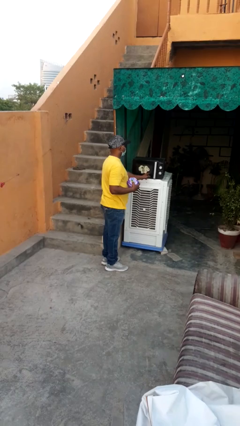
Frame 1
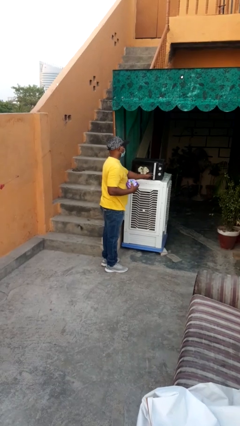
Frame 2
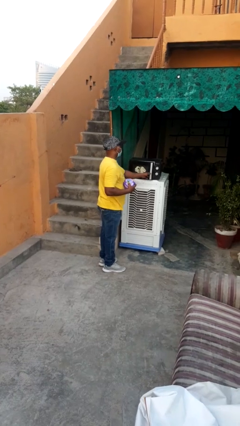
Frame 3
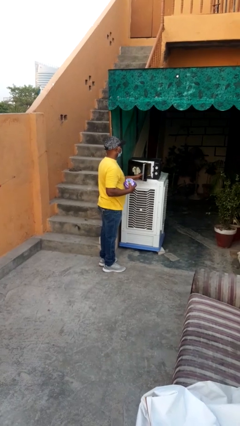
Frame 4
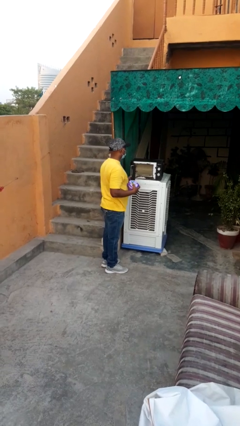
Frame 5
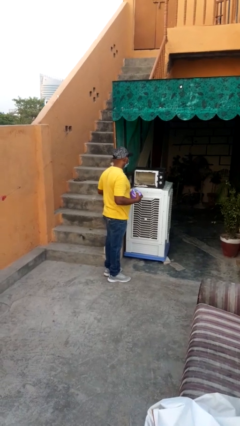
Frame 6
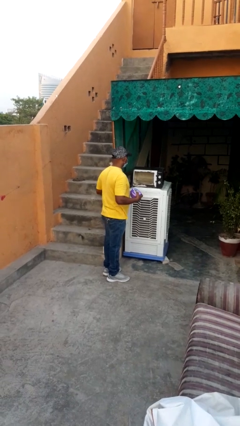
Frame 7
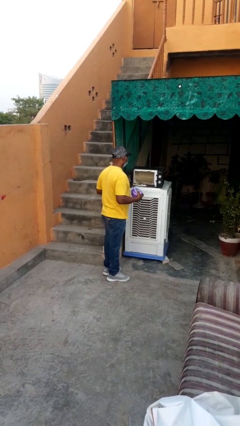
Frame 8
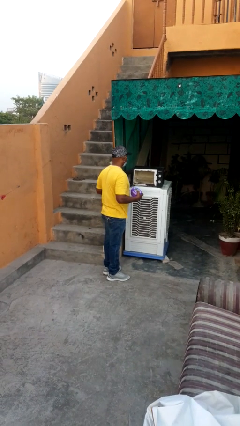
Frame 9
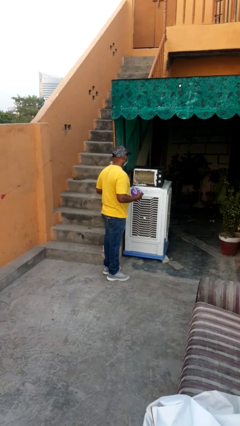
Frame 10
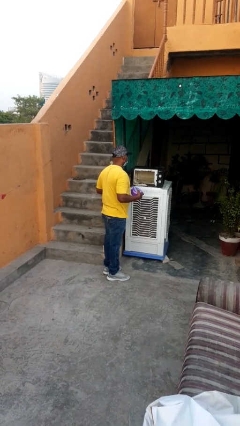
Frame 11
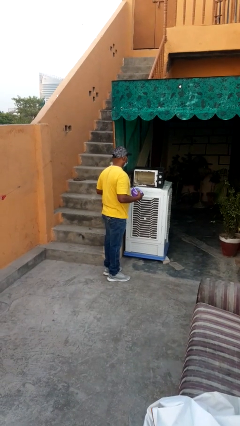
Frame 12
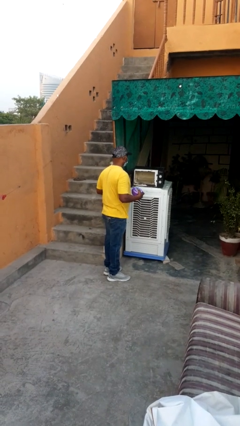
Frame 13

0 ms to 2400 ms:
person opens microwave

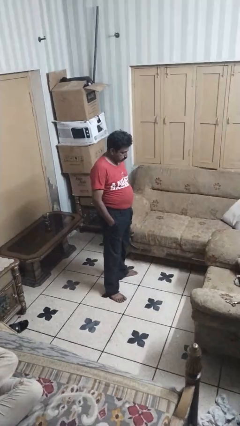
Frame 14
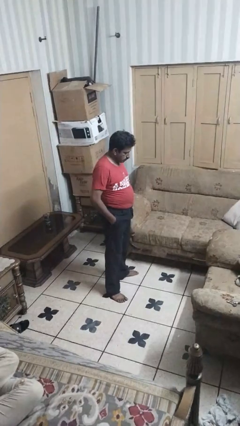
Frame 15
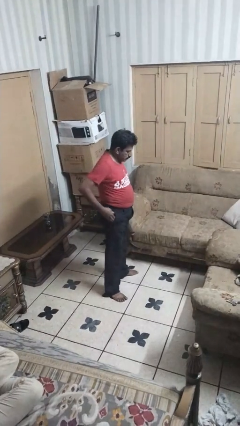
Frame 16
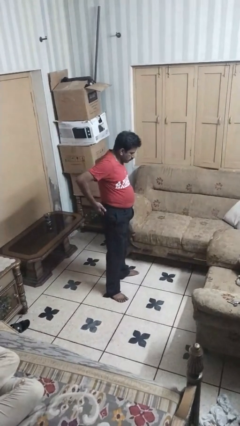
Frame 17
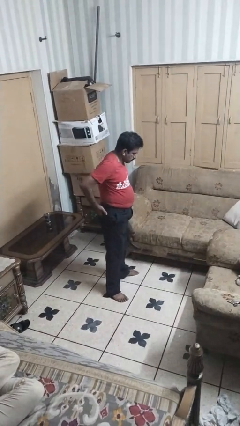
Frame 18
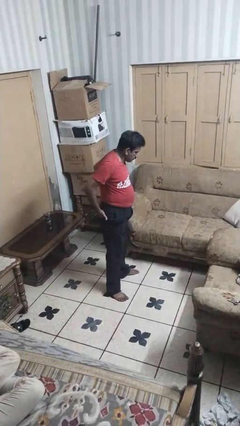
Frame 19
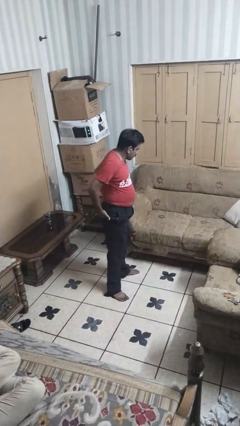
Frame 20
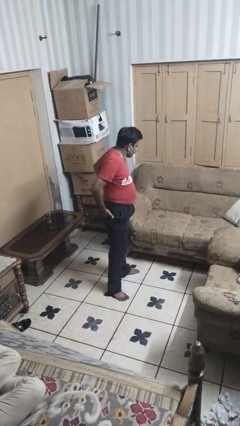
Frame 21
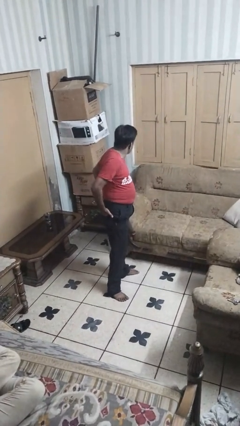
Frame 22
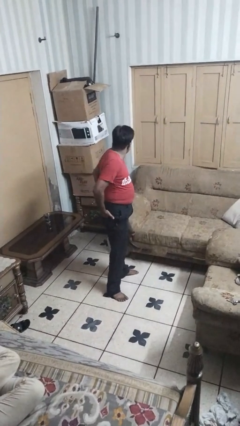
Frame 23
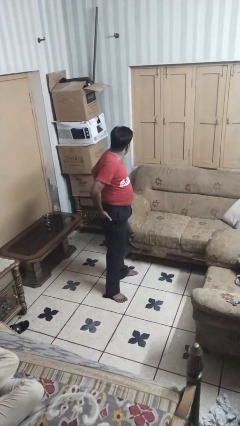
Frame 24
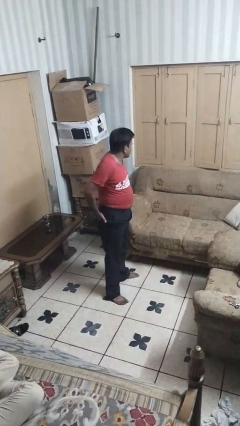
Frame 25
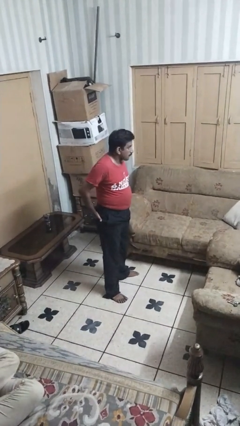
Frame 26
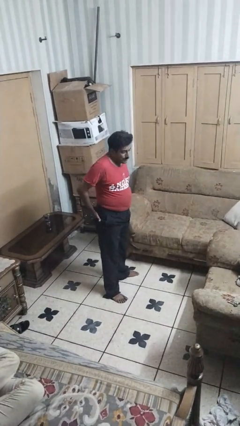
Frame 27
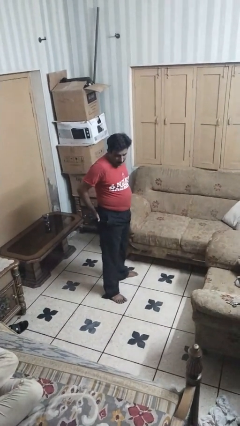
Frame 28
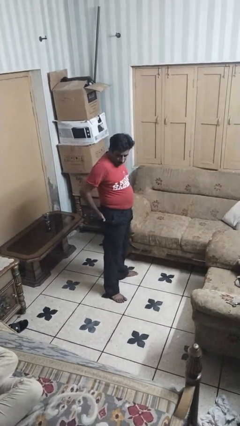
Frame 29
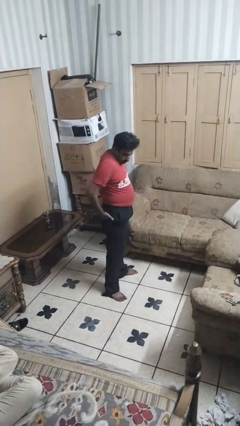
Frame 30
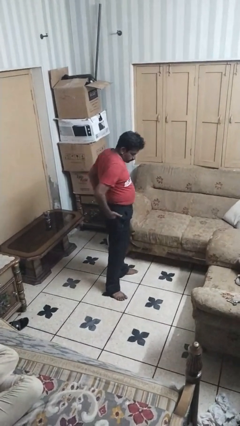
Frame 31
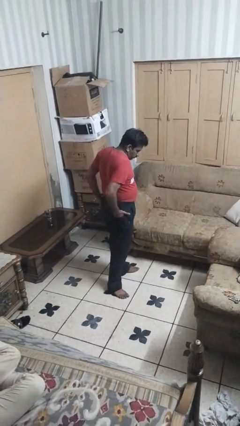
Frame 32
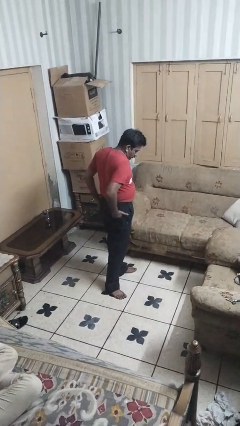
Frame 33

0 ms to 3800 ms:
person puts hands in back pockets

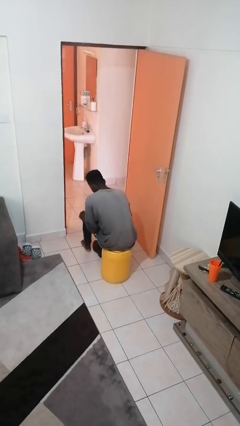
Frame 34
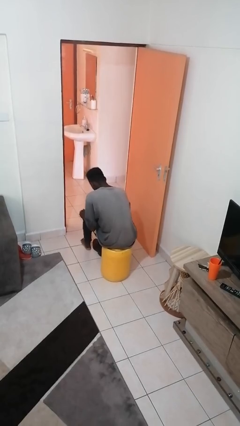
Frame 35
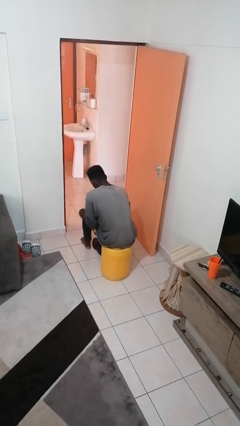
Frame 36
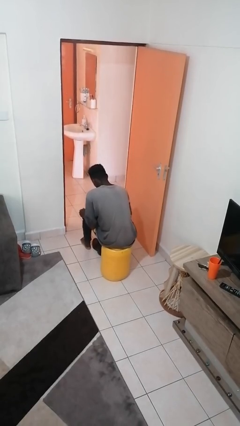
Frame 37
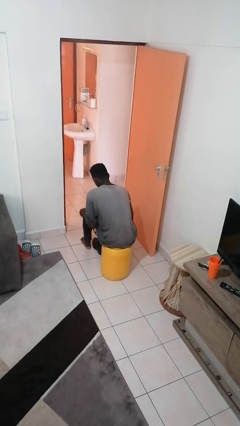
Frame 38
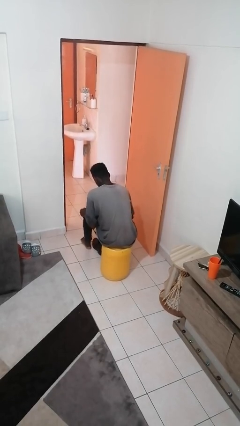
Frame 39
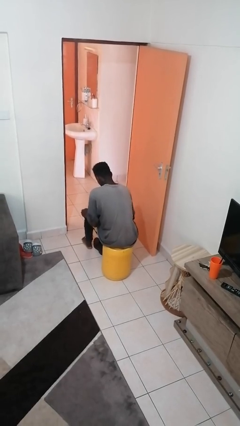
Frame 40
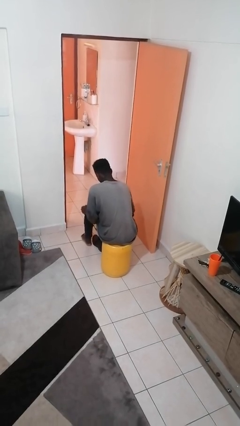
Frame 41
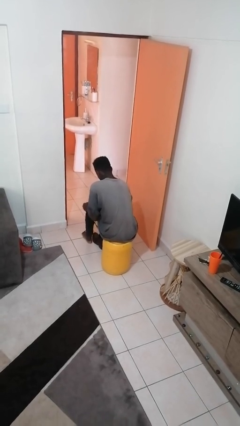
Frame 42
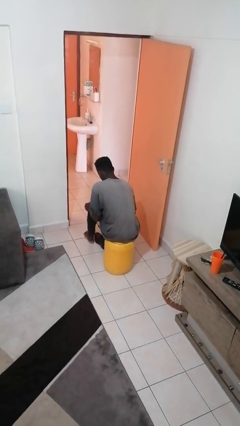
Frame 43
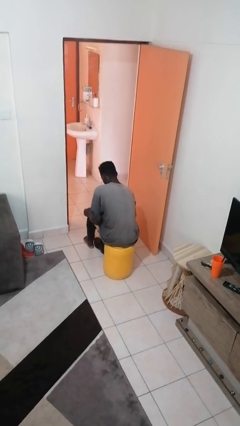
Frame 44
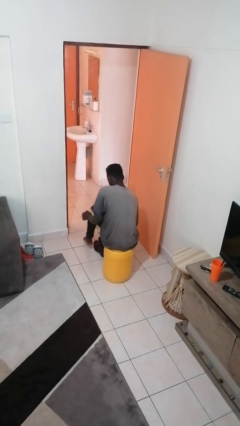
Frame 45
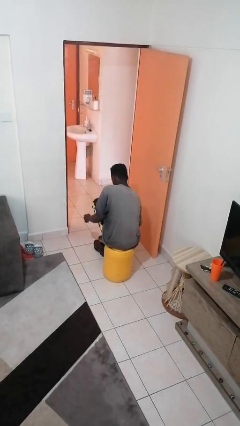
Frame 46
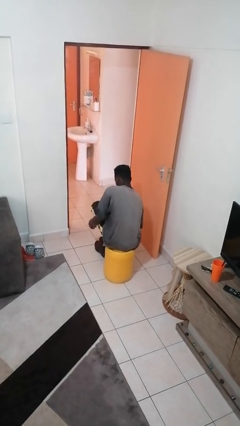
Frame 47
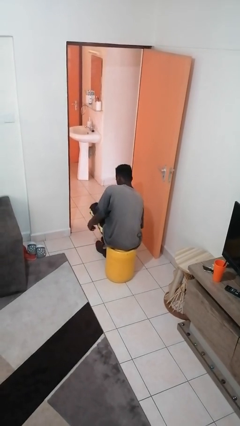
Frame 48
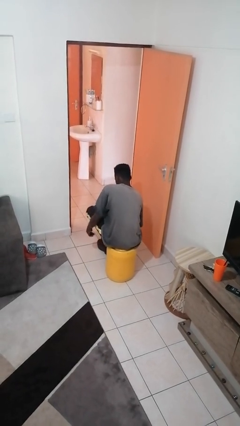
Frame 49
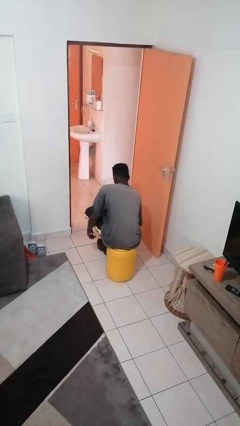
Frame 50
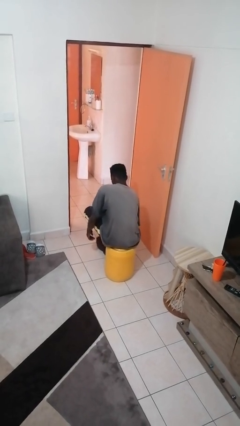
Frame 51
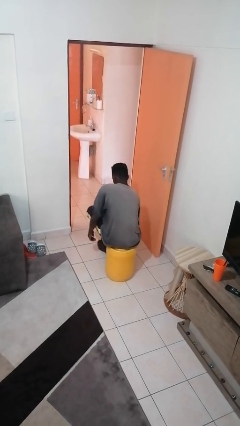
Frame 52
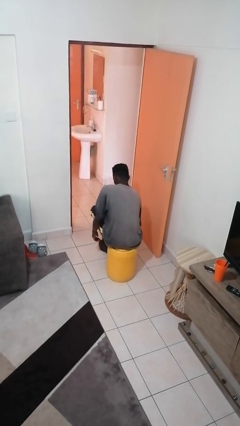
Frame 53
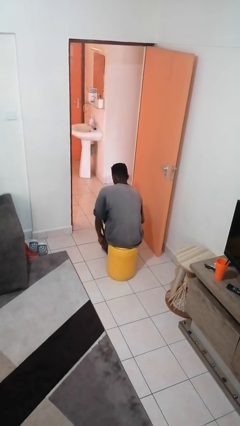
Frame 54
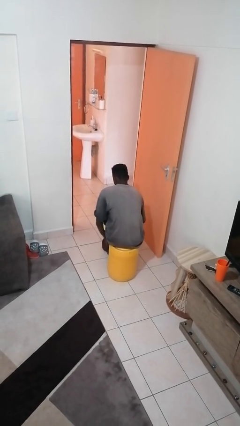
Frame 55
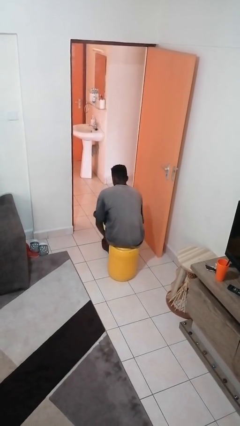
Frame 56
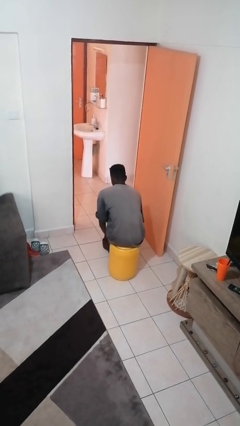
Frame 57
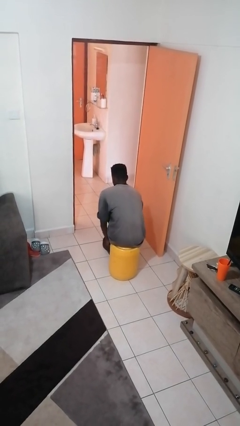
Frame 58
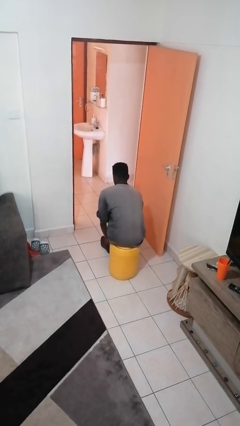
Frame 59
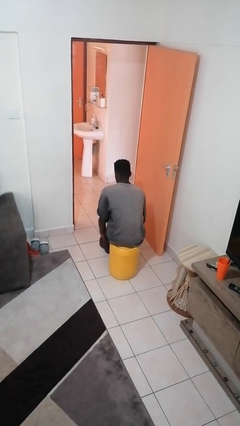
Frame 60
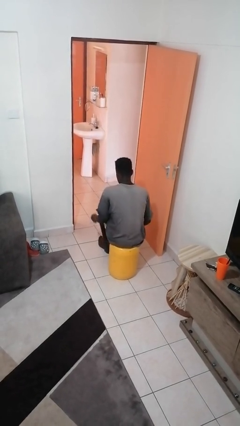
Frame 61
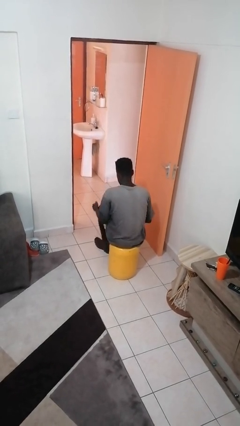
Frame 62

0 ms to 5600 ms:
person puts on shoes

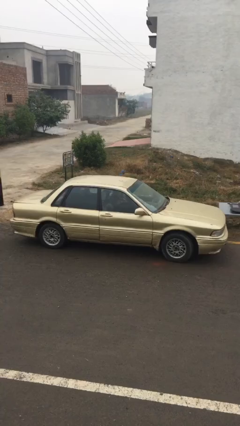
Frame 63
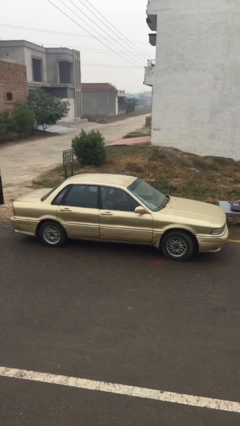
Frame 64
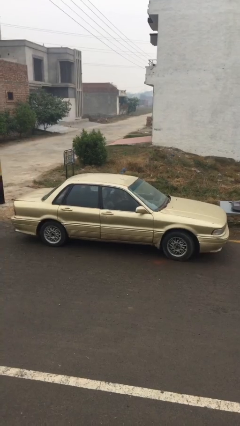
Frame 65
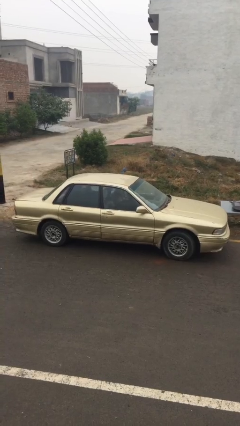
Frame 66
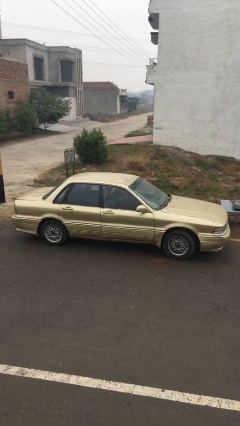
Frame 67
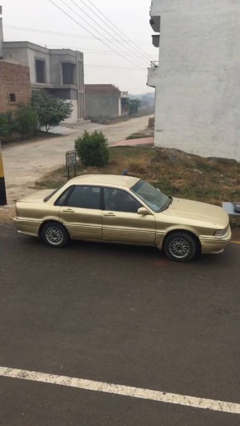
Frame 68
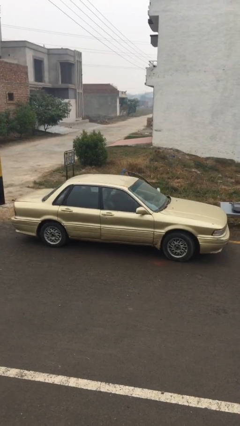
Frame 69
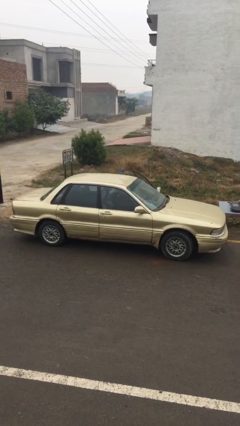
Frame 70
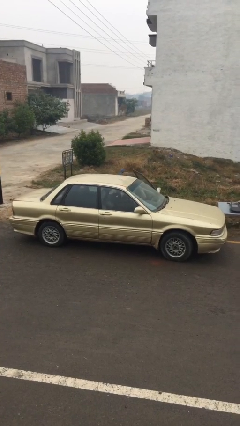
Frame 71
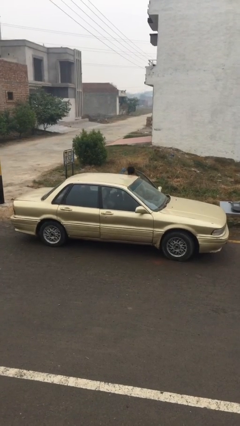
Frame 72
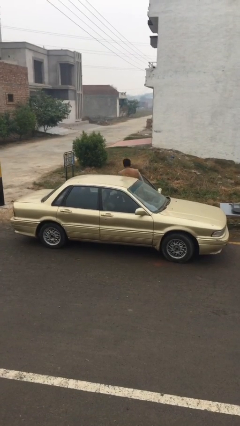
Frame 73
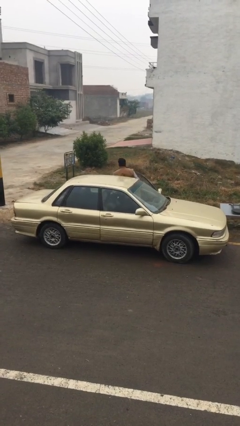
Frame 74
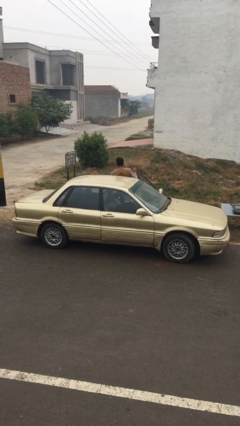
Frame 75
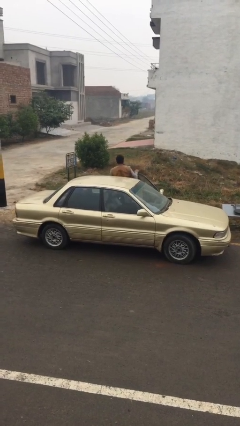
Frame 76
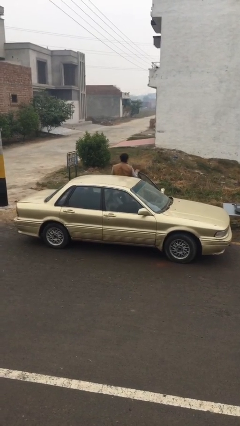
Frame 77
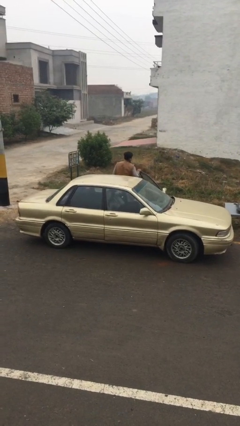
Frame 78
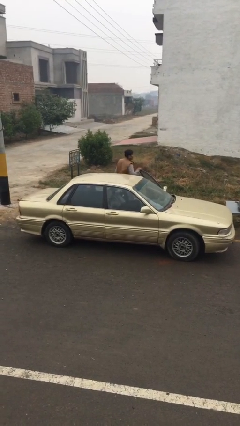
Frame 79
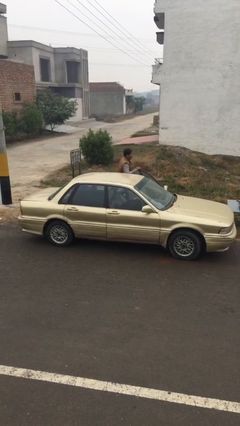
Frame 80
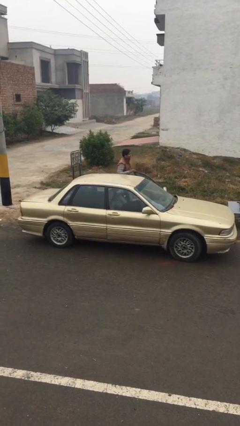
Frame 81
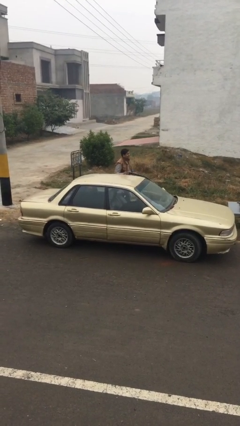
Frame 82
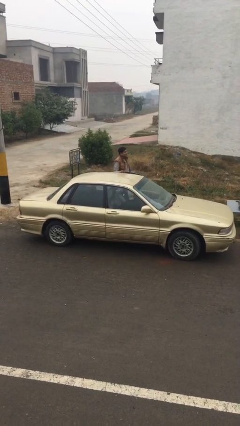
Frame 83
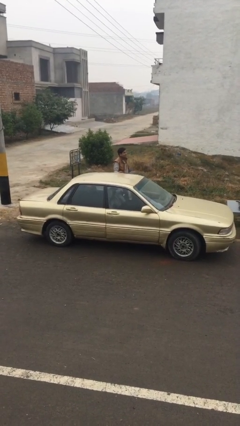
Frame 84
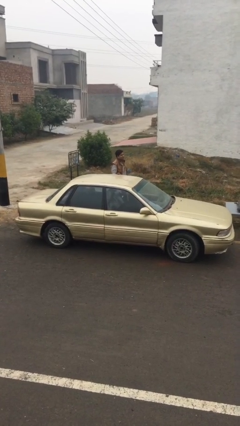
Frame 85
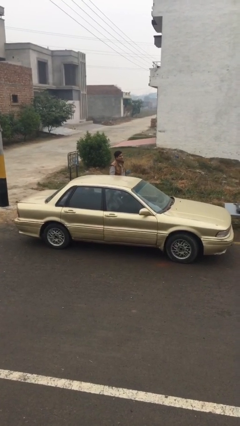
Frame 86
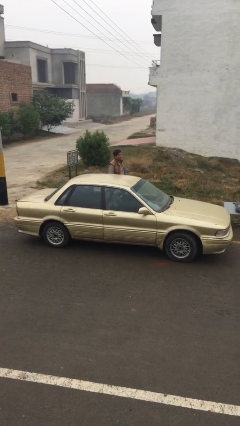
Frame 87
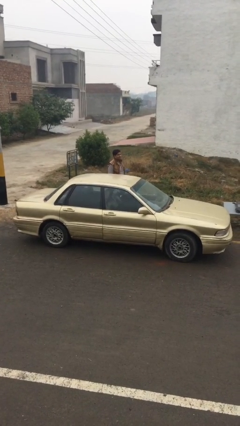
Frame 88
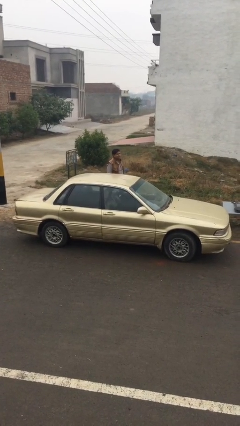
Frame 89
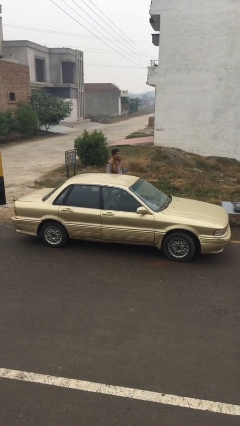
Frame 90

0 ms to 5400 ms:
car drops off person

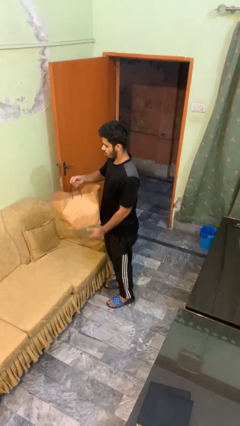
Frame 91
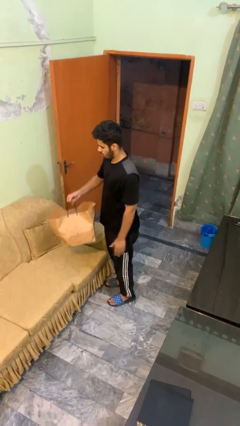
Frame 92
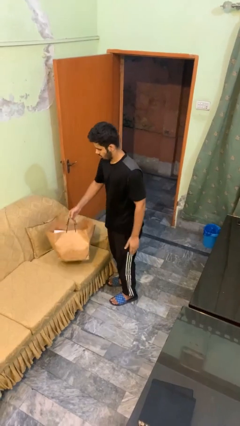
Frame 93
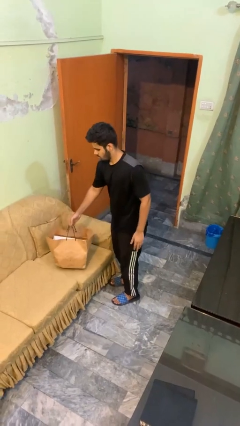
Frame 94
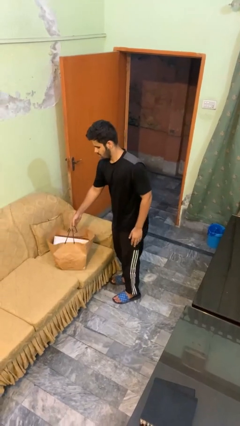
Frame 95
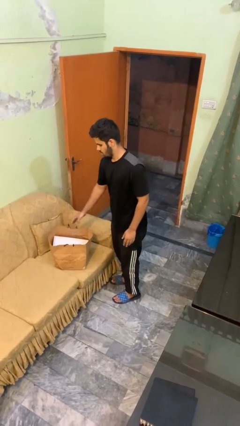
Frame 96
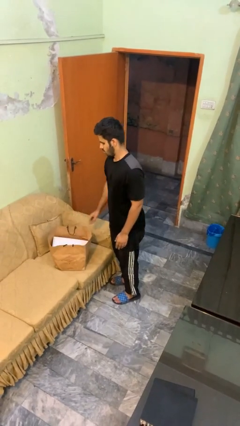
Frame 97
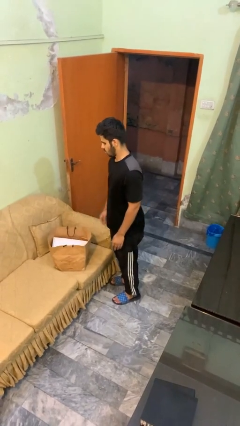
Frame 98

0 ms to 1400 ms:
person puts down object on couch
